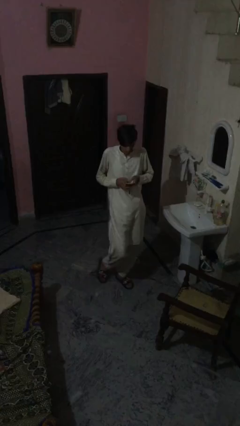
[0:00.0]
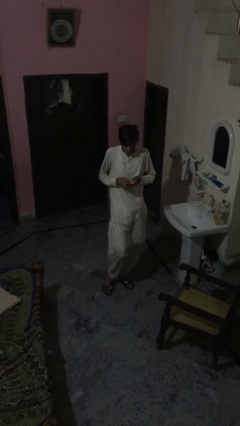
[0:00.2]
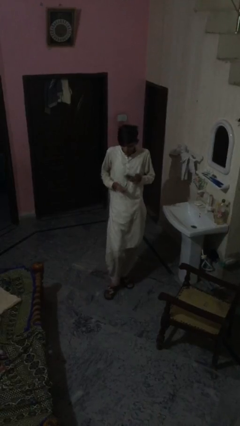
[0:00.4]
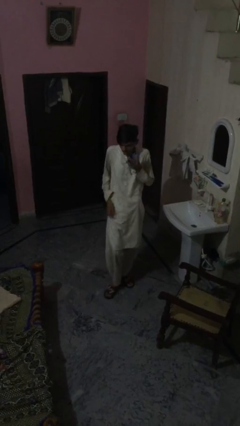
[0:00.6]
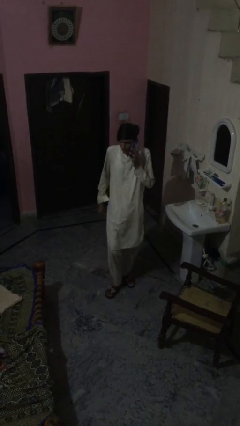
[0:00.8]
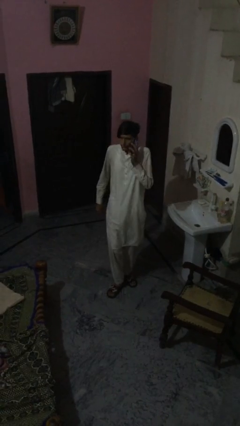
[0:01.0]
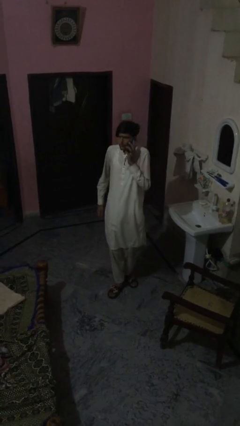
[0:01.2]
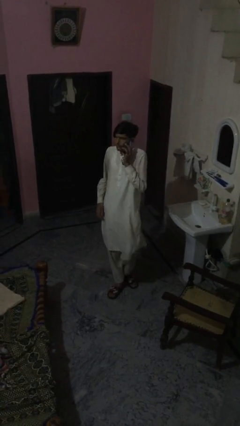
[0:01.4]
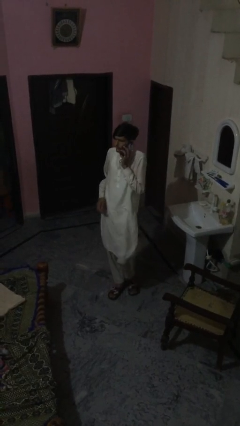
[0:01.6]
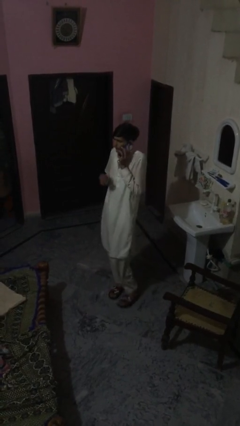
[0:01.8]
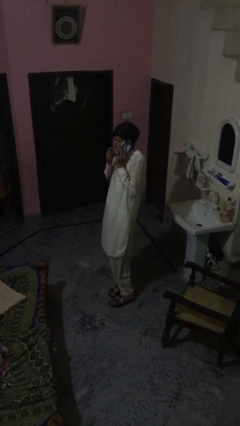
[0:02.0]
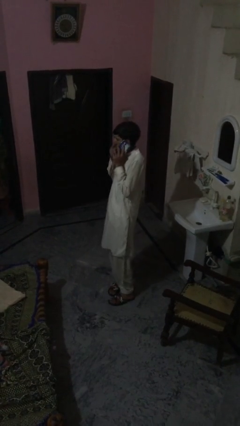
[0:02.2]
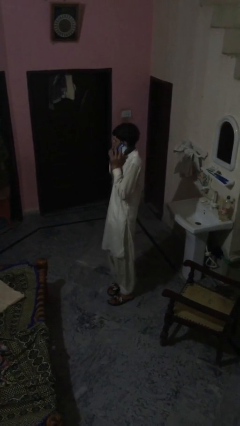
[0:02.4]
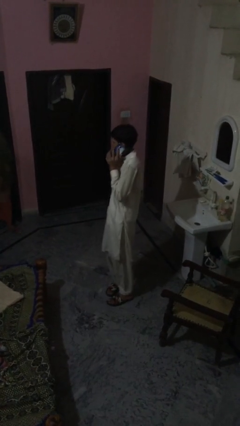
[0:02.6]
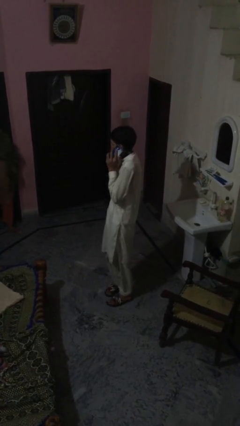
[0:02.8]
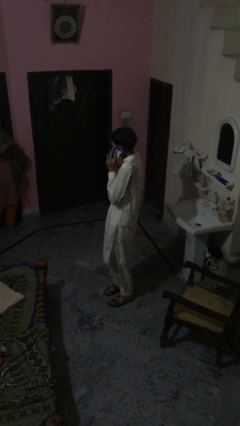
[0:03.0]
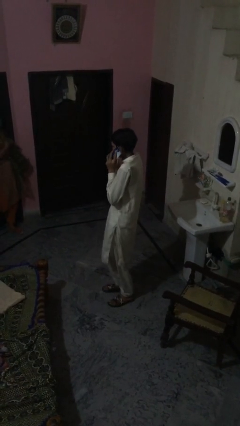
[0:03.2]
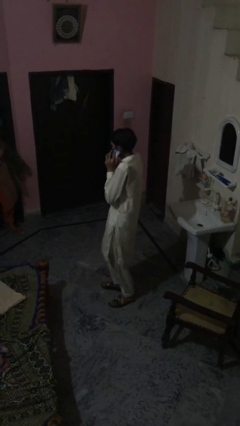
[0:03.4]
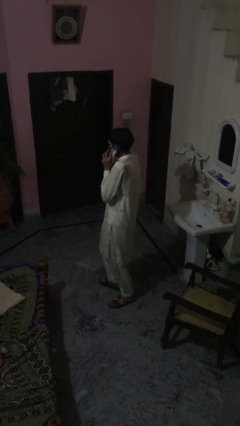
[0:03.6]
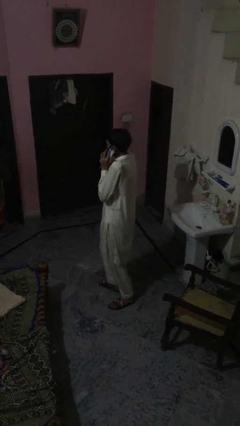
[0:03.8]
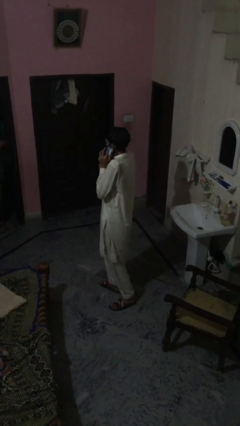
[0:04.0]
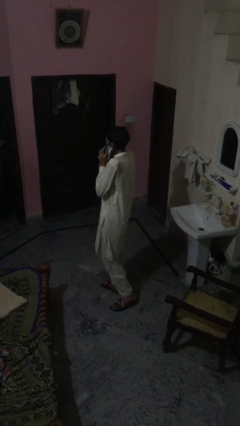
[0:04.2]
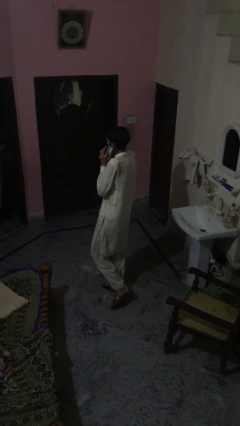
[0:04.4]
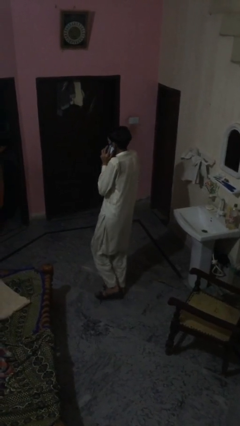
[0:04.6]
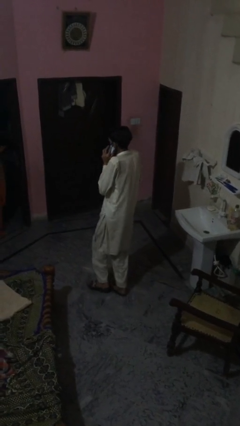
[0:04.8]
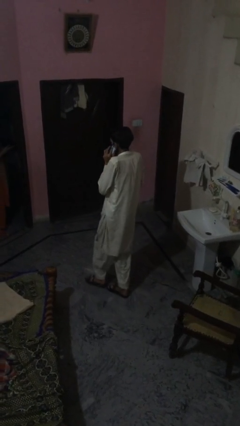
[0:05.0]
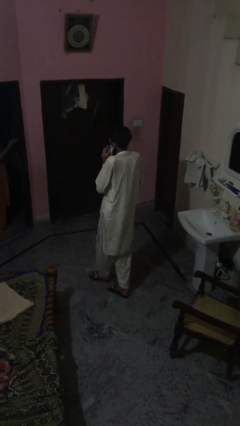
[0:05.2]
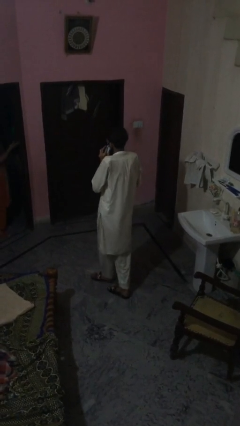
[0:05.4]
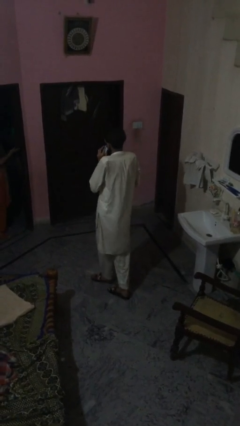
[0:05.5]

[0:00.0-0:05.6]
person talks on phone

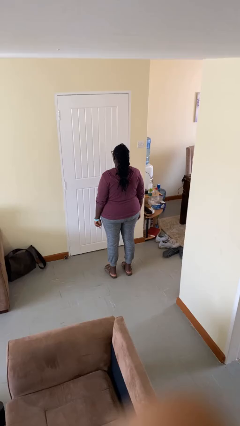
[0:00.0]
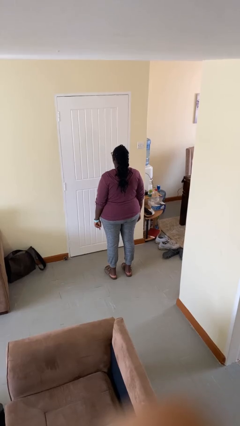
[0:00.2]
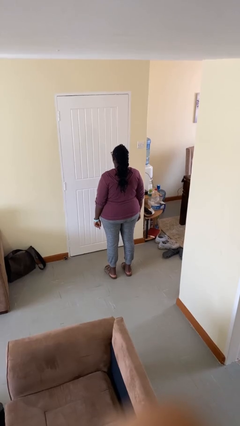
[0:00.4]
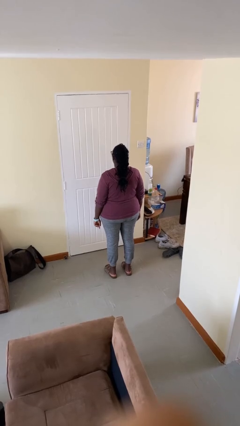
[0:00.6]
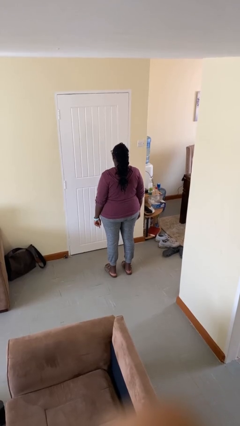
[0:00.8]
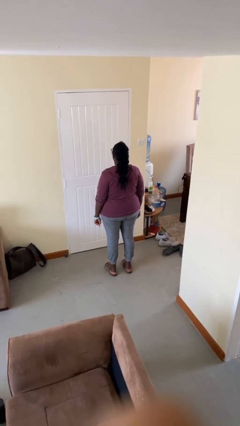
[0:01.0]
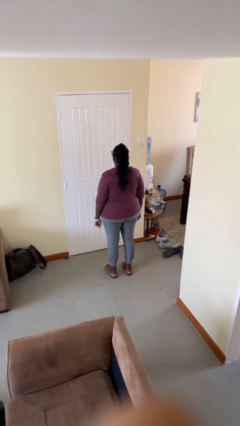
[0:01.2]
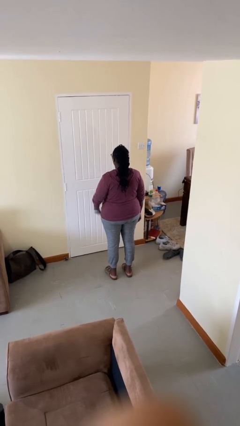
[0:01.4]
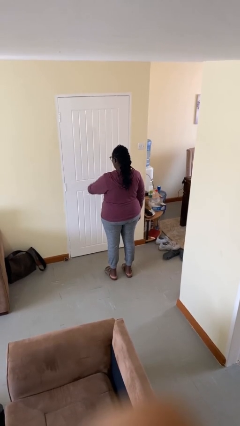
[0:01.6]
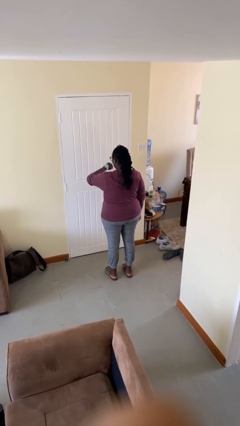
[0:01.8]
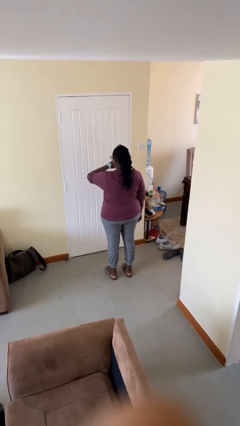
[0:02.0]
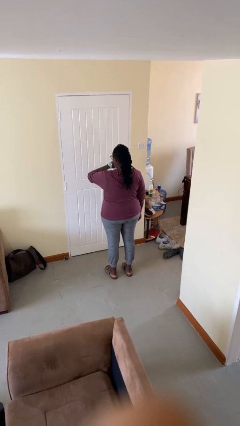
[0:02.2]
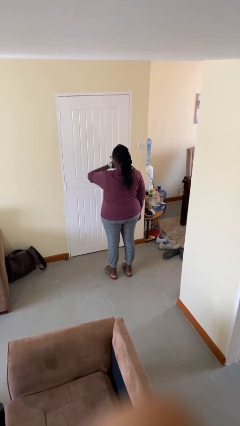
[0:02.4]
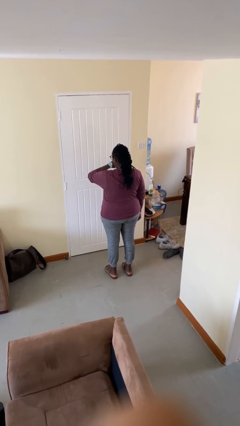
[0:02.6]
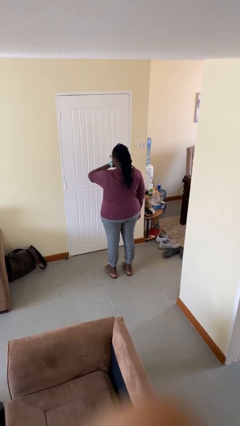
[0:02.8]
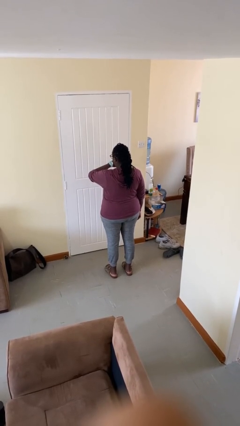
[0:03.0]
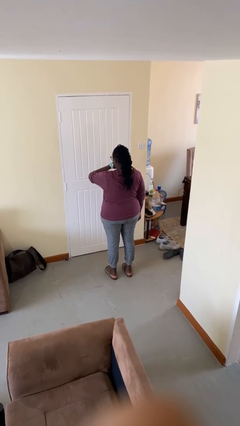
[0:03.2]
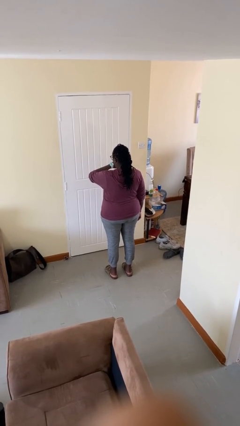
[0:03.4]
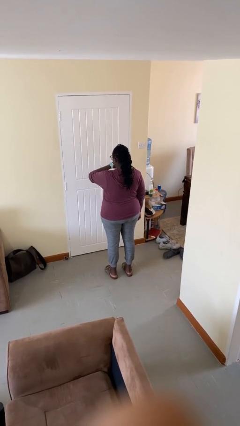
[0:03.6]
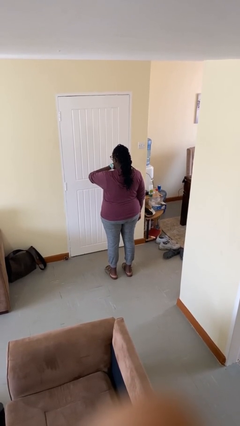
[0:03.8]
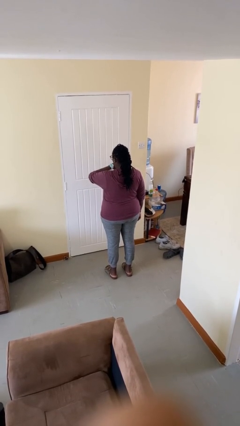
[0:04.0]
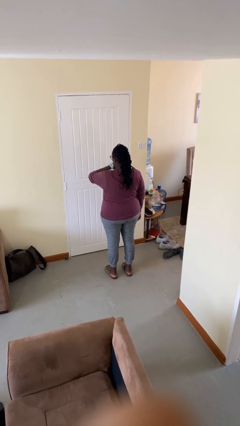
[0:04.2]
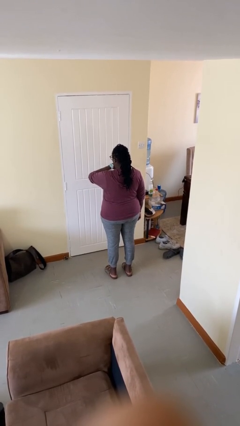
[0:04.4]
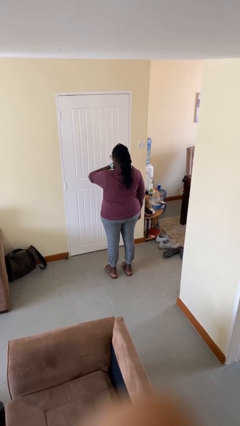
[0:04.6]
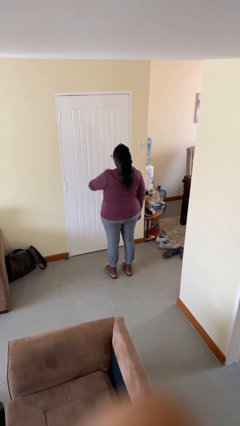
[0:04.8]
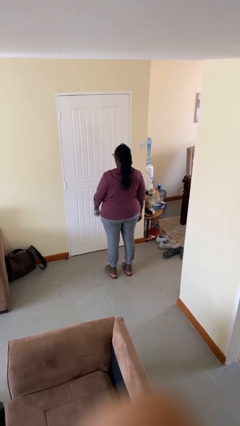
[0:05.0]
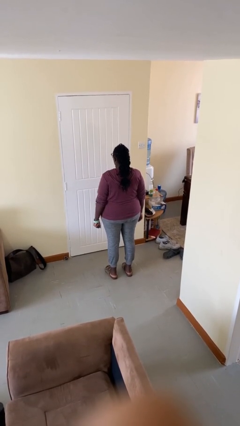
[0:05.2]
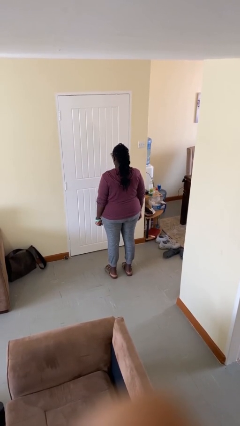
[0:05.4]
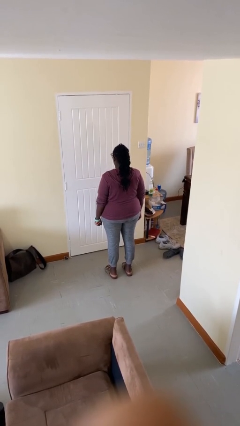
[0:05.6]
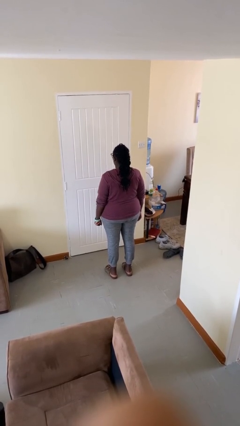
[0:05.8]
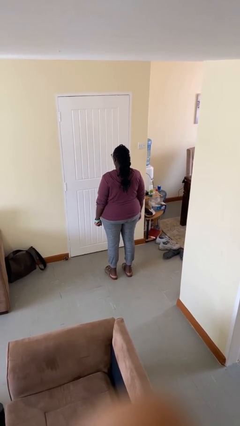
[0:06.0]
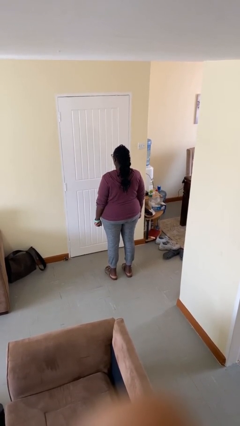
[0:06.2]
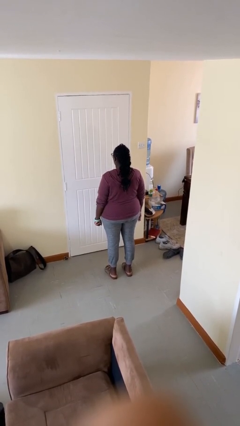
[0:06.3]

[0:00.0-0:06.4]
person looks at wristwatch

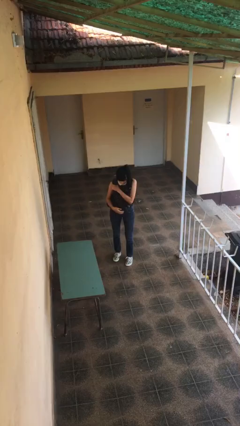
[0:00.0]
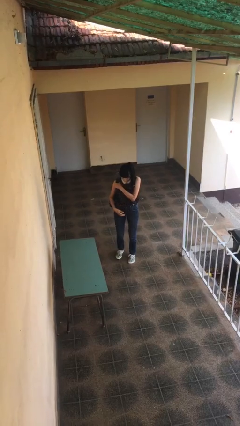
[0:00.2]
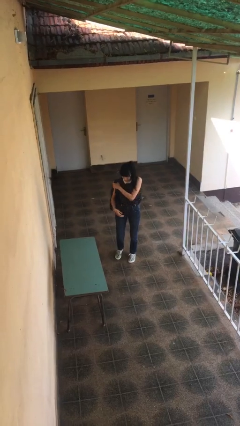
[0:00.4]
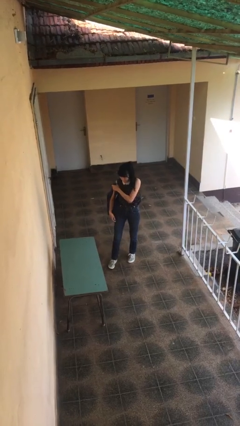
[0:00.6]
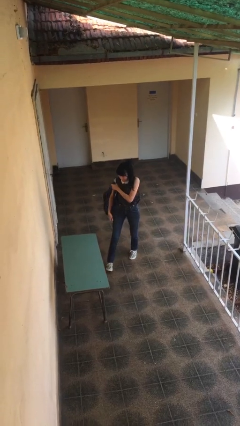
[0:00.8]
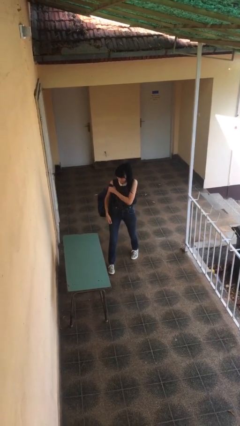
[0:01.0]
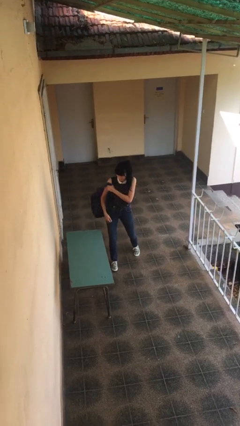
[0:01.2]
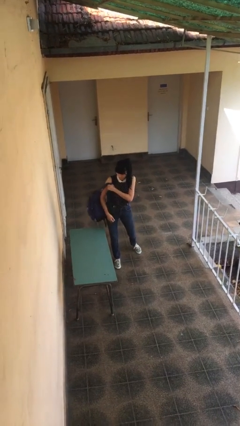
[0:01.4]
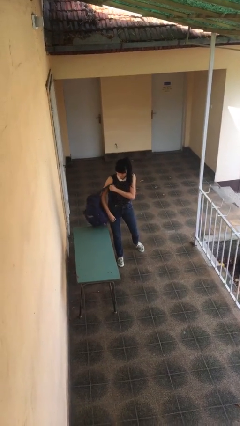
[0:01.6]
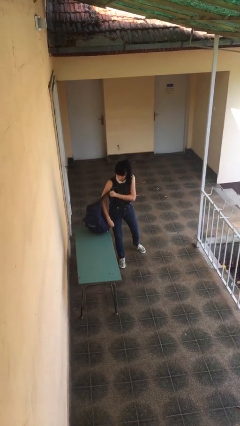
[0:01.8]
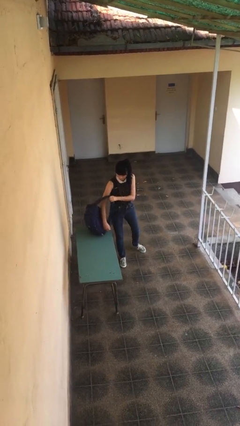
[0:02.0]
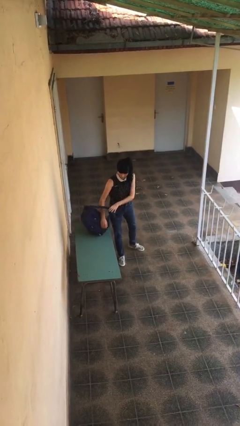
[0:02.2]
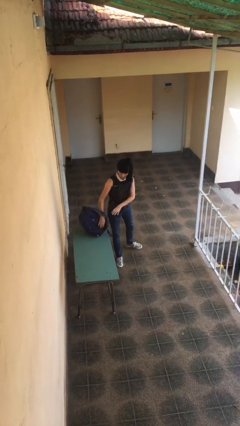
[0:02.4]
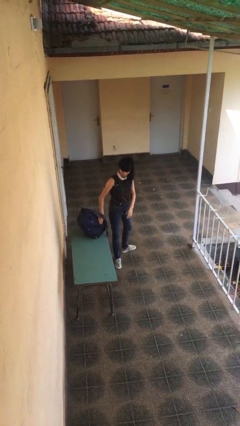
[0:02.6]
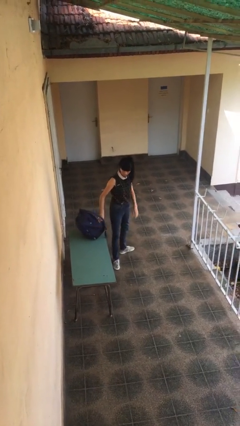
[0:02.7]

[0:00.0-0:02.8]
person puts down object on table

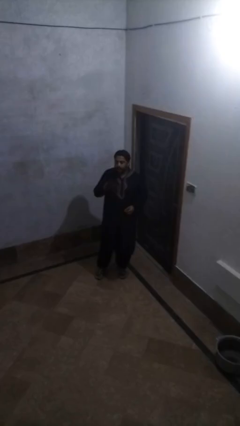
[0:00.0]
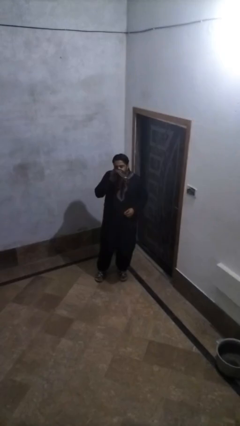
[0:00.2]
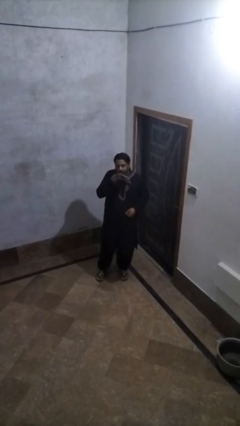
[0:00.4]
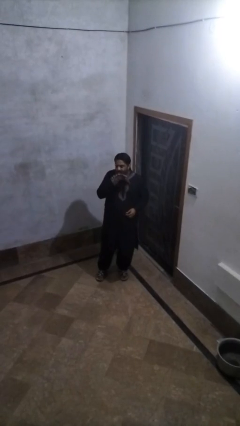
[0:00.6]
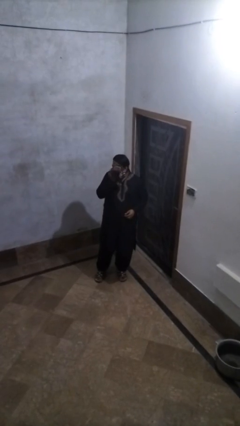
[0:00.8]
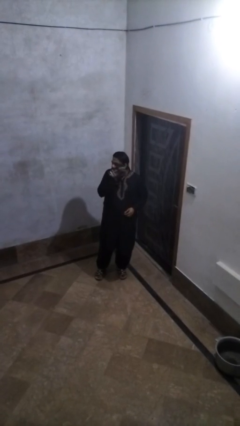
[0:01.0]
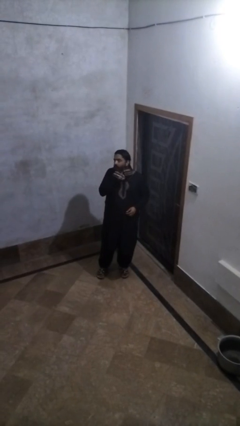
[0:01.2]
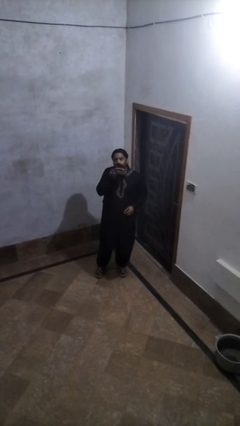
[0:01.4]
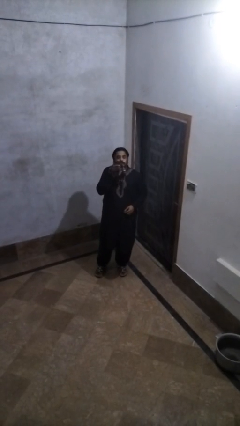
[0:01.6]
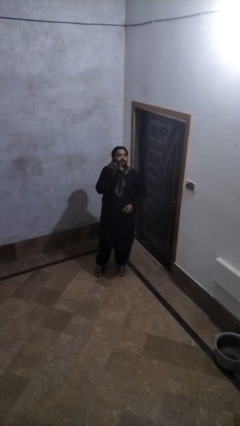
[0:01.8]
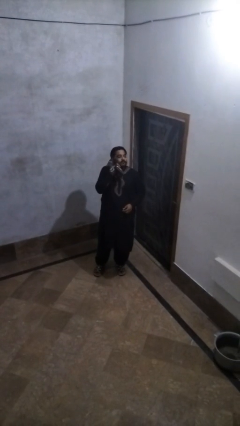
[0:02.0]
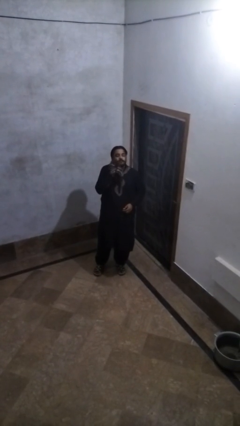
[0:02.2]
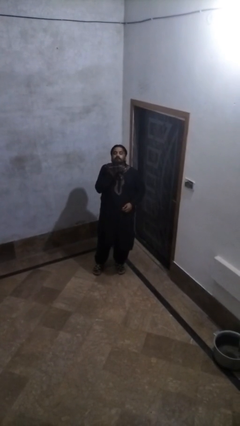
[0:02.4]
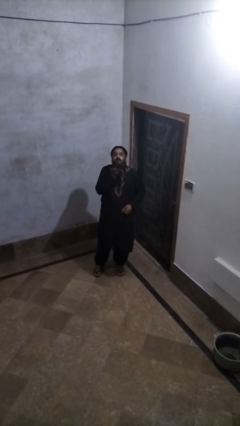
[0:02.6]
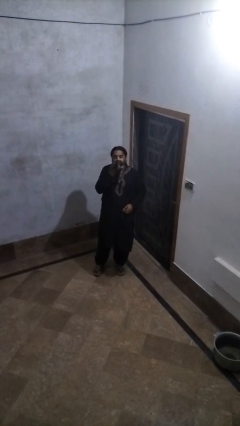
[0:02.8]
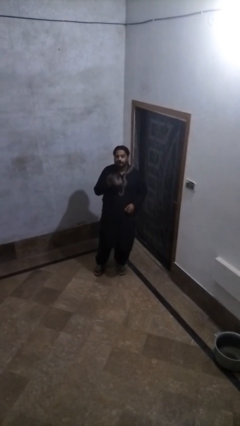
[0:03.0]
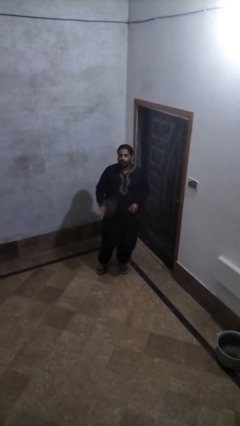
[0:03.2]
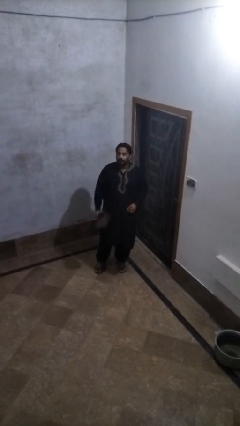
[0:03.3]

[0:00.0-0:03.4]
person wipes mouth with napkin
